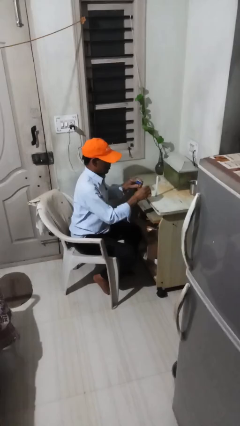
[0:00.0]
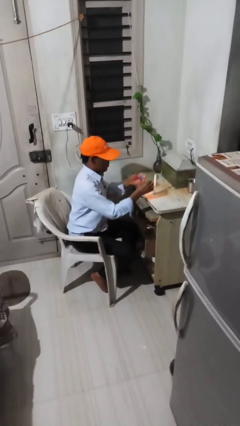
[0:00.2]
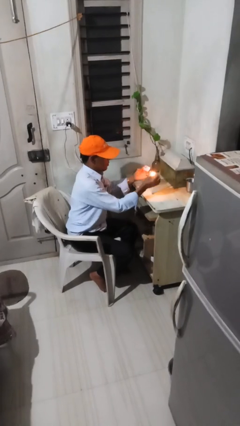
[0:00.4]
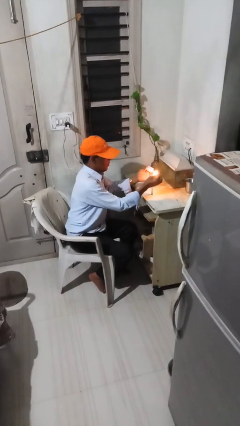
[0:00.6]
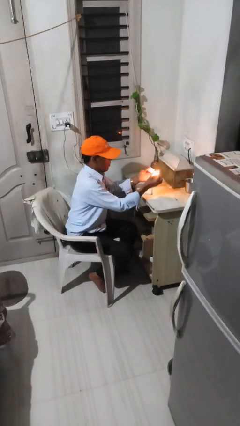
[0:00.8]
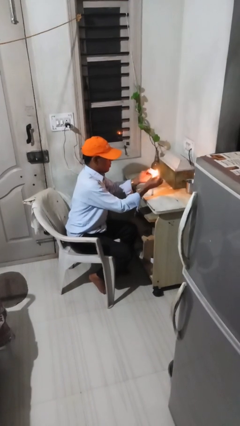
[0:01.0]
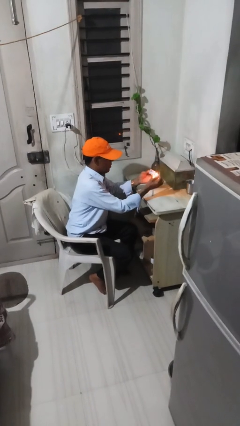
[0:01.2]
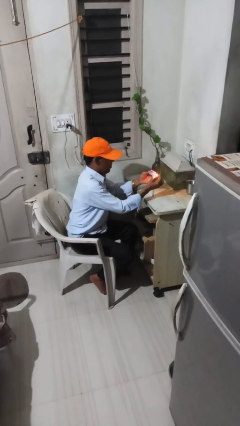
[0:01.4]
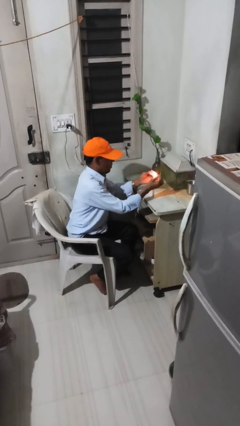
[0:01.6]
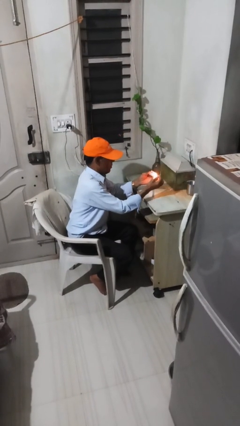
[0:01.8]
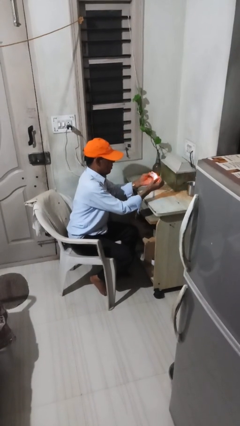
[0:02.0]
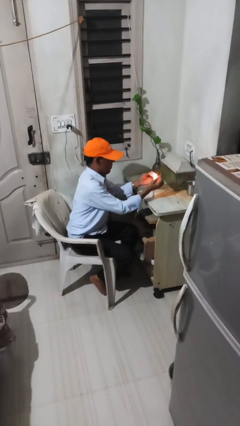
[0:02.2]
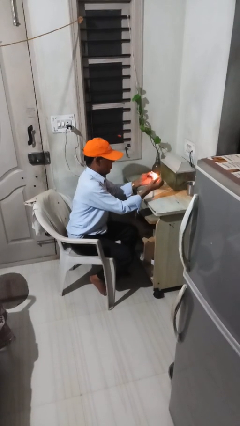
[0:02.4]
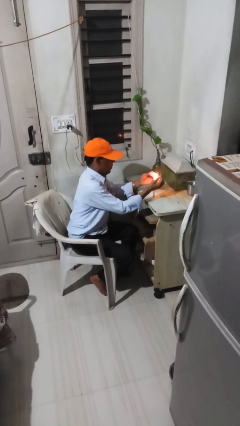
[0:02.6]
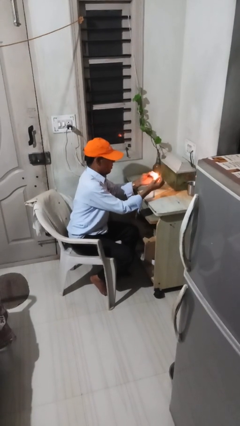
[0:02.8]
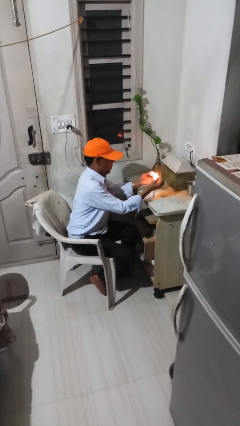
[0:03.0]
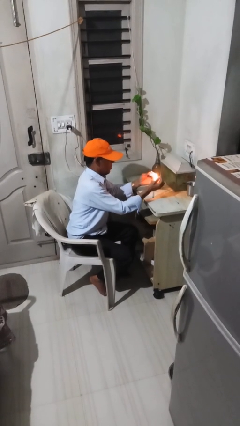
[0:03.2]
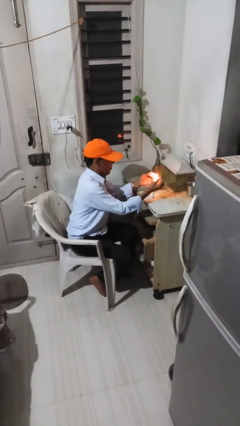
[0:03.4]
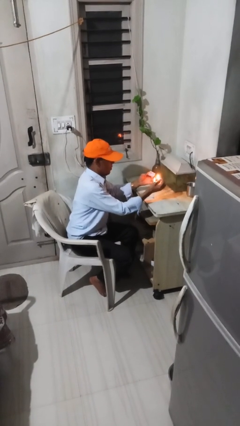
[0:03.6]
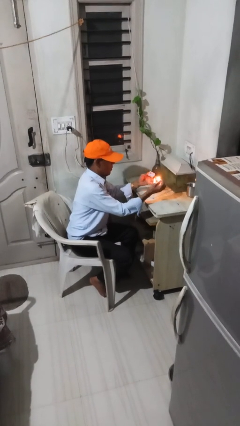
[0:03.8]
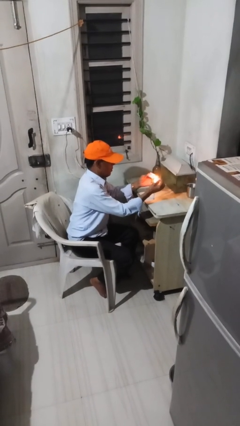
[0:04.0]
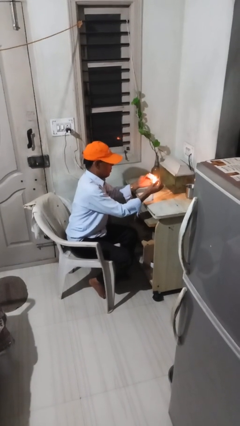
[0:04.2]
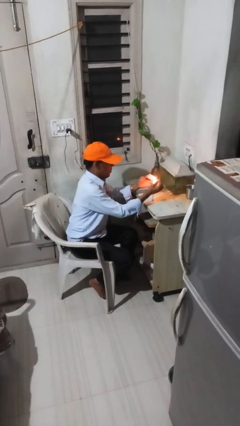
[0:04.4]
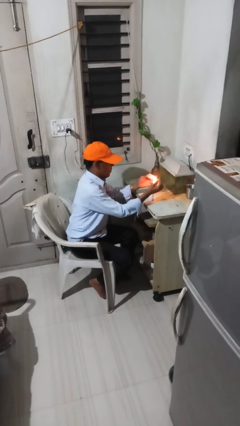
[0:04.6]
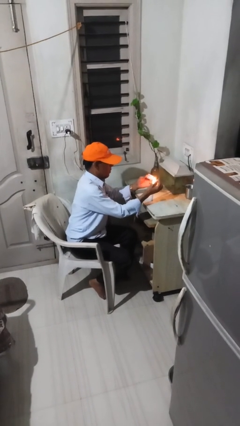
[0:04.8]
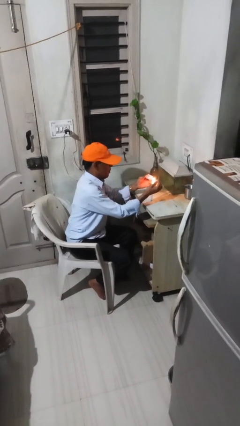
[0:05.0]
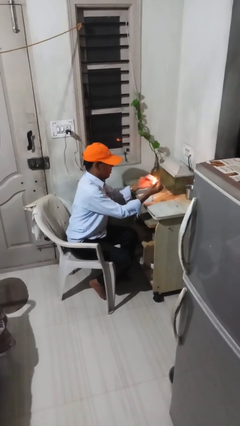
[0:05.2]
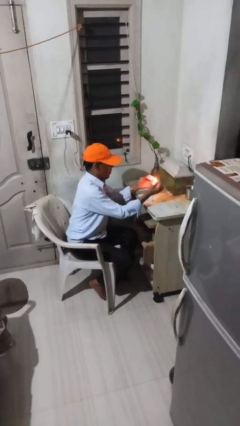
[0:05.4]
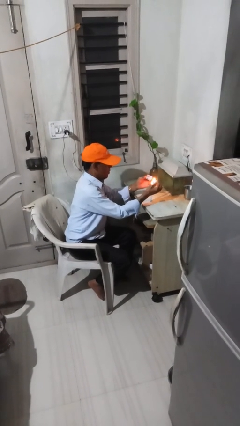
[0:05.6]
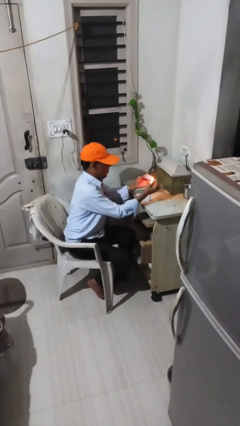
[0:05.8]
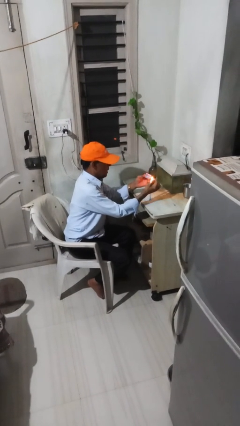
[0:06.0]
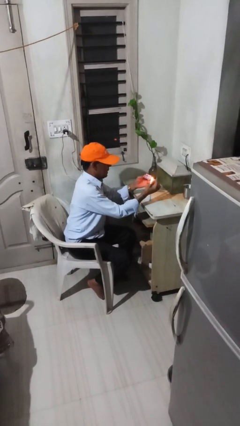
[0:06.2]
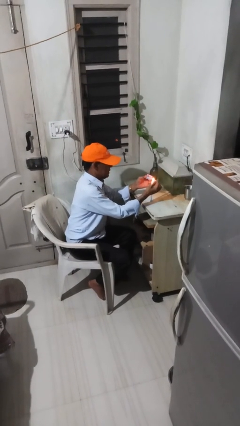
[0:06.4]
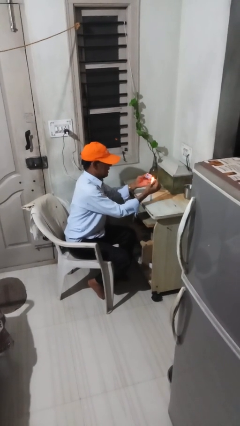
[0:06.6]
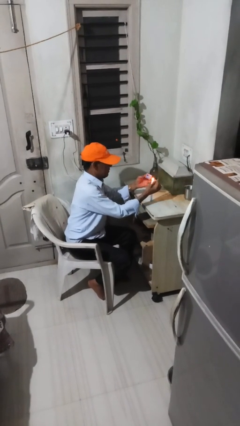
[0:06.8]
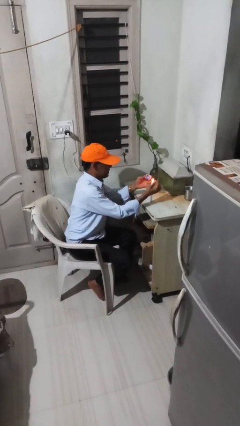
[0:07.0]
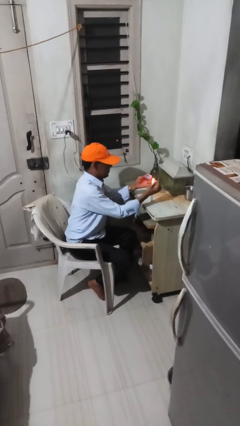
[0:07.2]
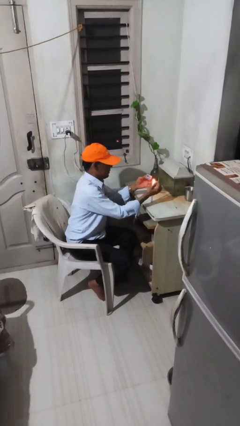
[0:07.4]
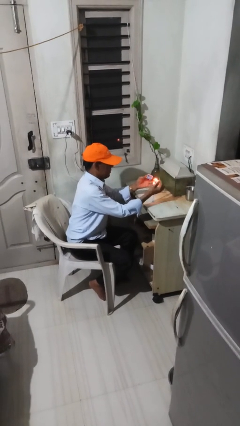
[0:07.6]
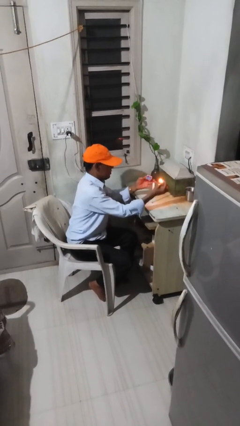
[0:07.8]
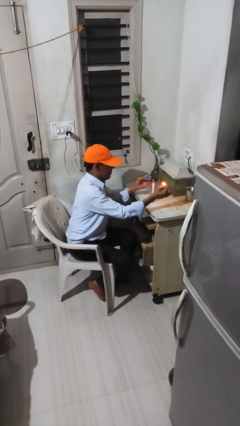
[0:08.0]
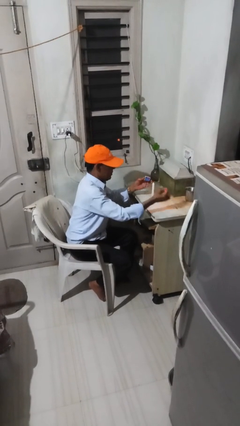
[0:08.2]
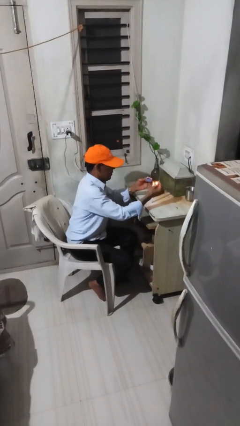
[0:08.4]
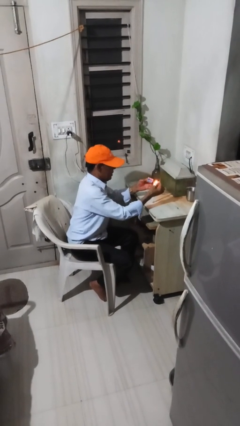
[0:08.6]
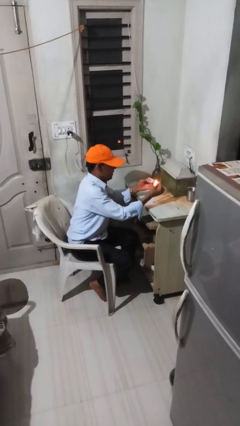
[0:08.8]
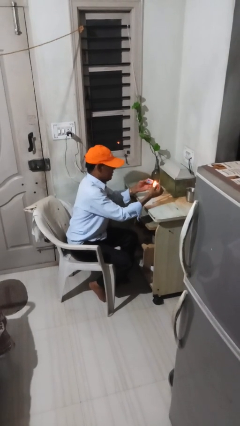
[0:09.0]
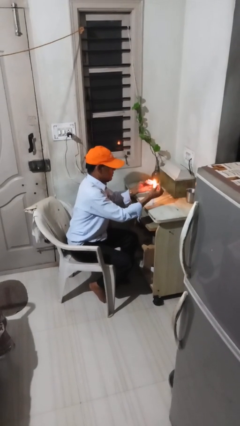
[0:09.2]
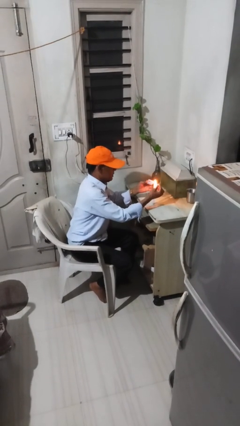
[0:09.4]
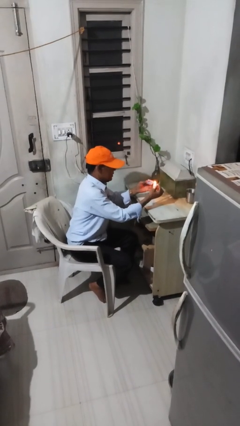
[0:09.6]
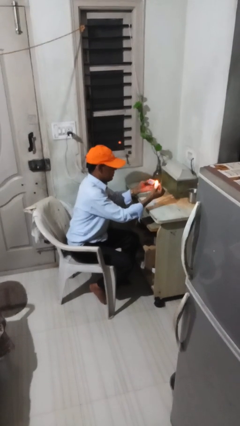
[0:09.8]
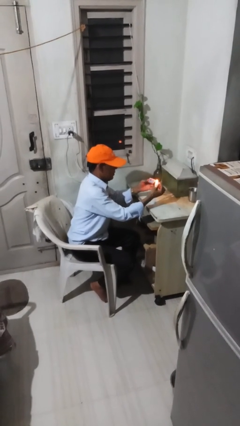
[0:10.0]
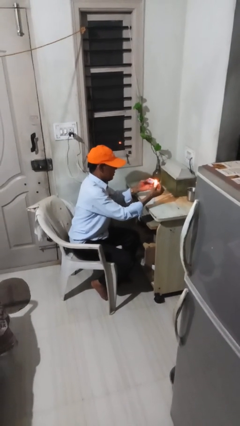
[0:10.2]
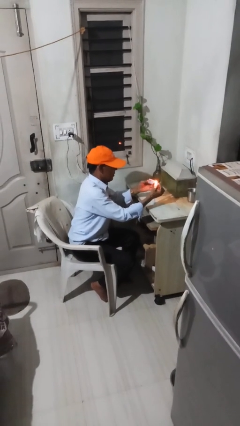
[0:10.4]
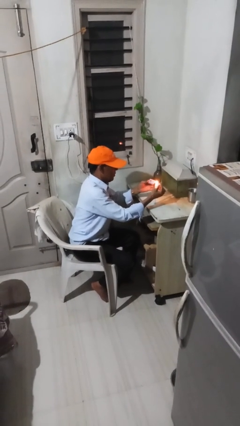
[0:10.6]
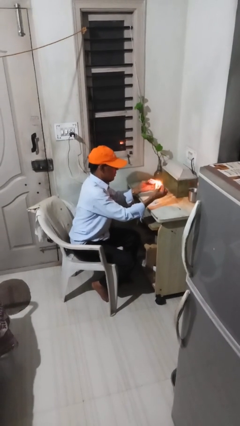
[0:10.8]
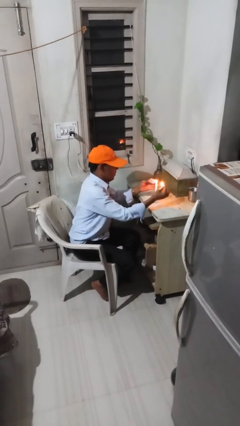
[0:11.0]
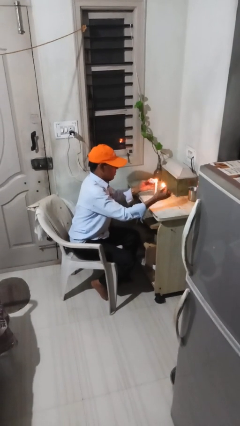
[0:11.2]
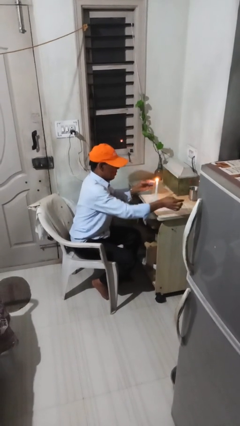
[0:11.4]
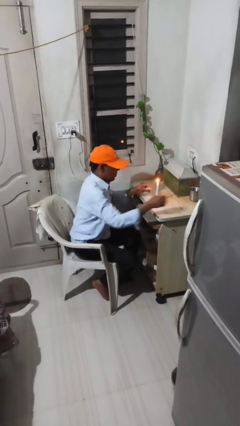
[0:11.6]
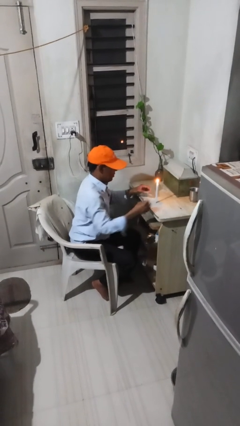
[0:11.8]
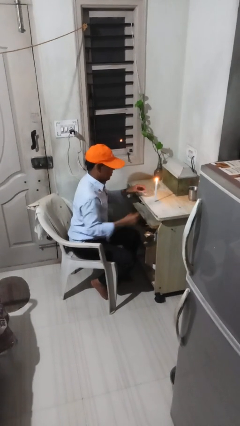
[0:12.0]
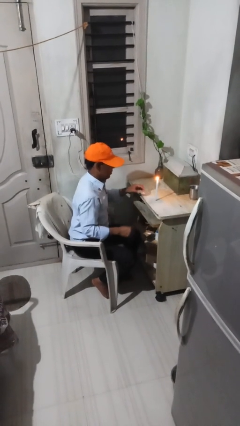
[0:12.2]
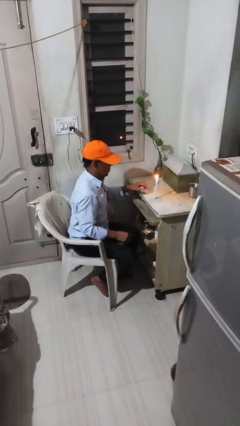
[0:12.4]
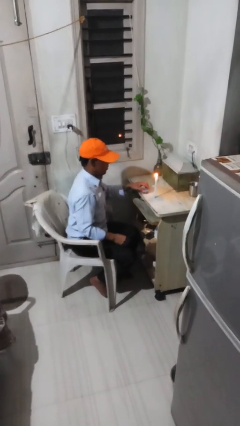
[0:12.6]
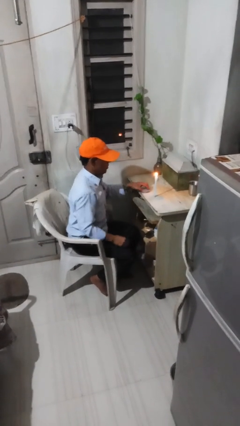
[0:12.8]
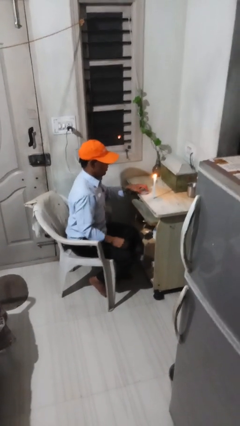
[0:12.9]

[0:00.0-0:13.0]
person lights candle

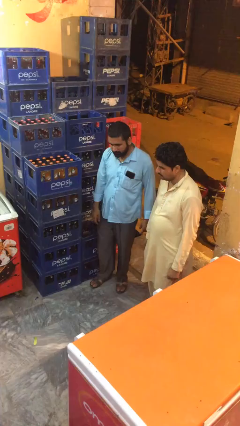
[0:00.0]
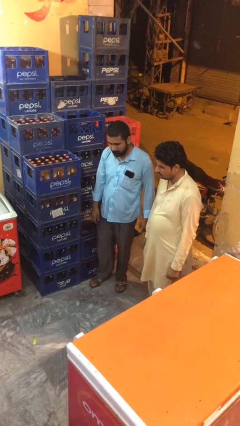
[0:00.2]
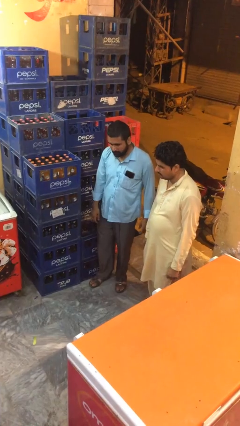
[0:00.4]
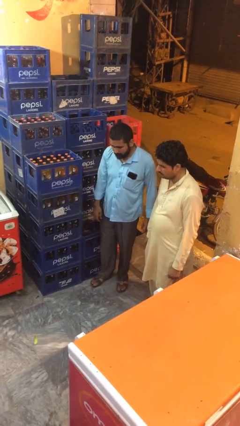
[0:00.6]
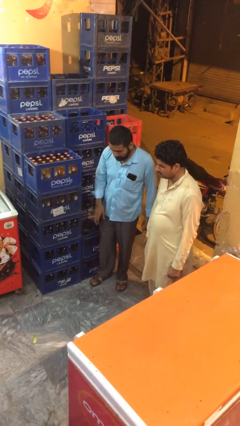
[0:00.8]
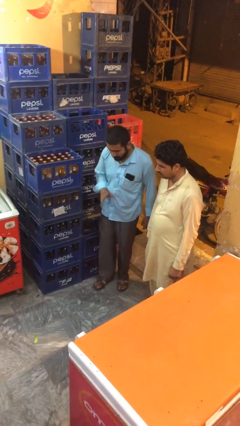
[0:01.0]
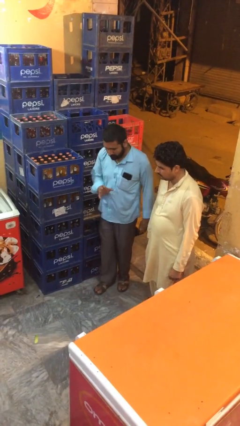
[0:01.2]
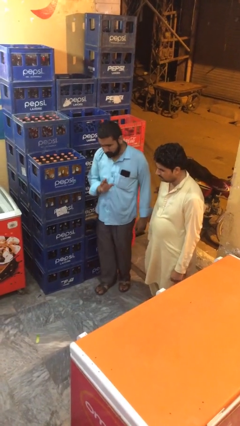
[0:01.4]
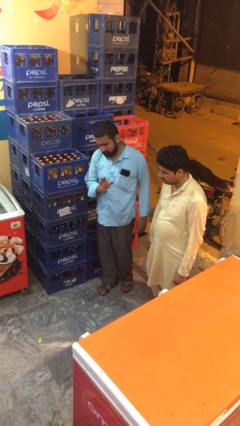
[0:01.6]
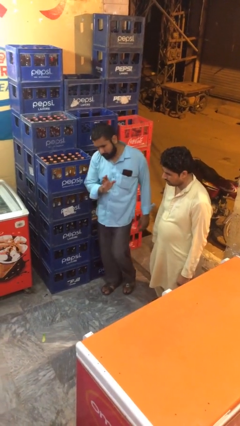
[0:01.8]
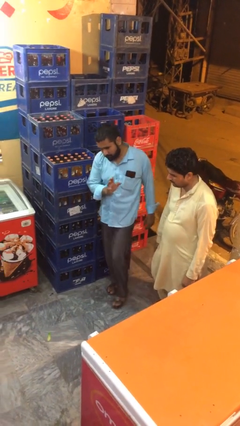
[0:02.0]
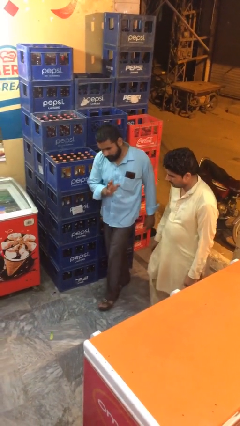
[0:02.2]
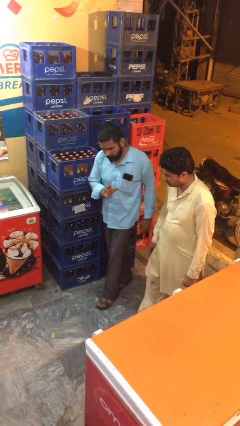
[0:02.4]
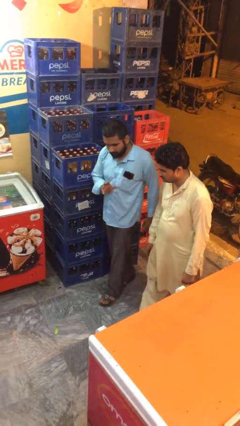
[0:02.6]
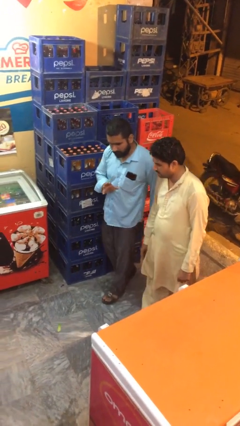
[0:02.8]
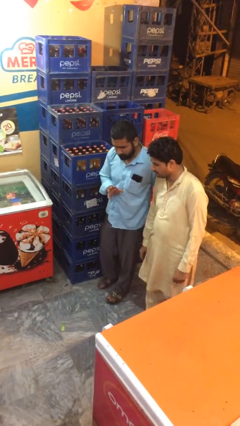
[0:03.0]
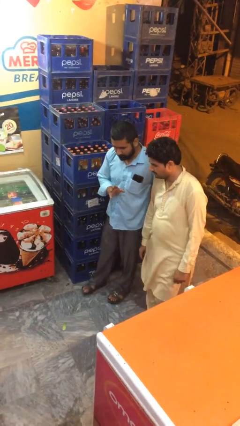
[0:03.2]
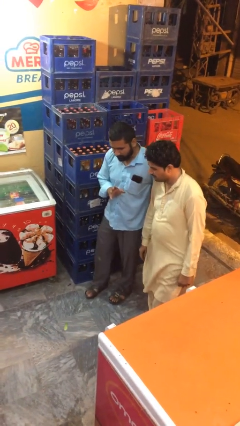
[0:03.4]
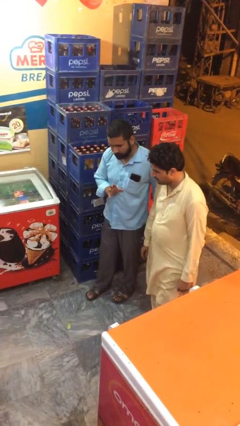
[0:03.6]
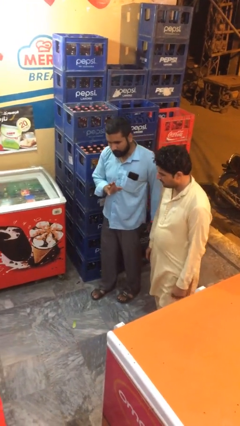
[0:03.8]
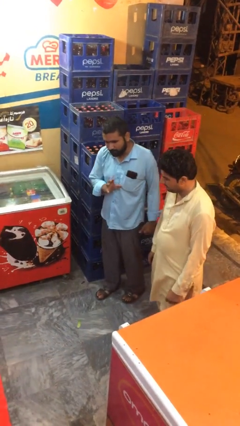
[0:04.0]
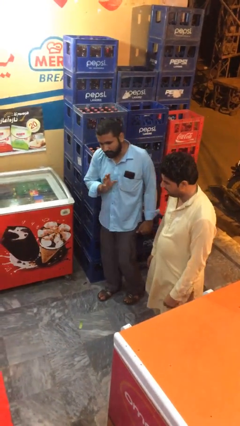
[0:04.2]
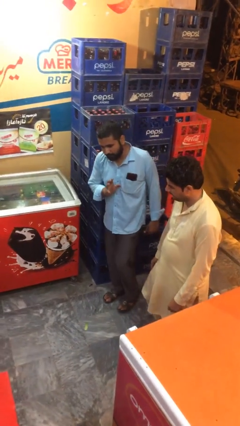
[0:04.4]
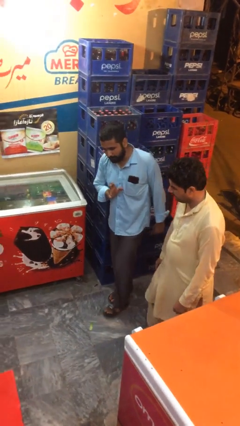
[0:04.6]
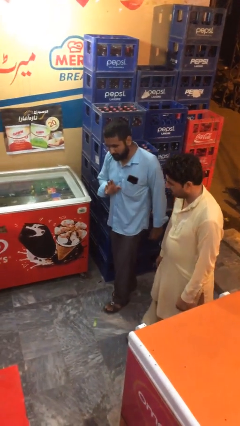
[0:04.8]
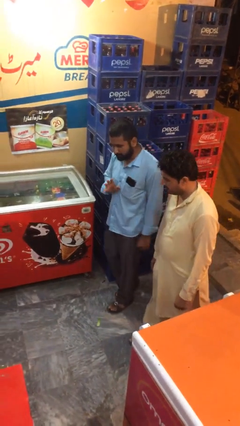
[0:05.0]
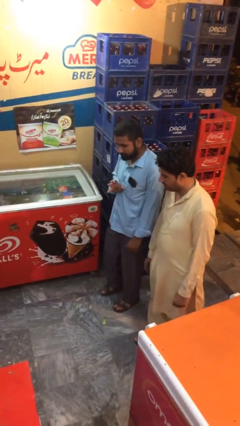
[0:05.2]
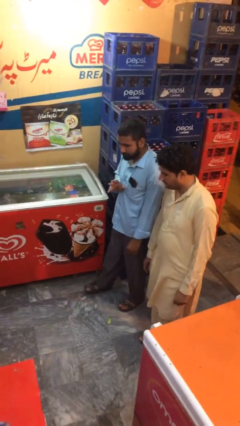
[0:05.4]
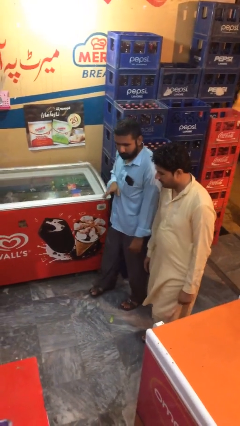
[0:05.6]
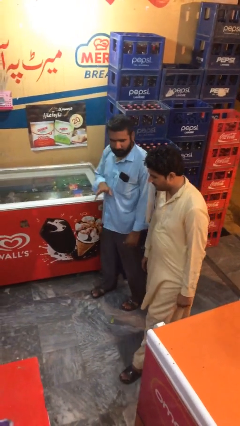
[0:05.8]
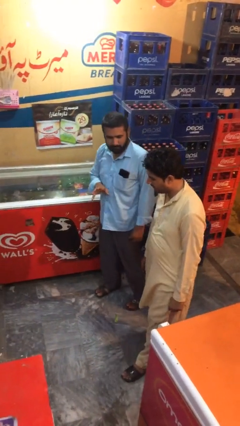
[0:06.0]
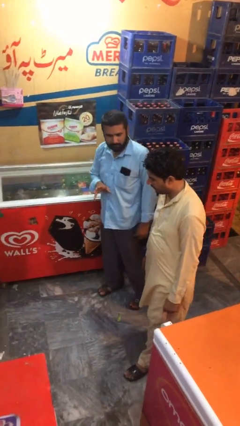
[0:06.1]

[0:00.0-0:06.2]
person talks to person
